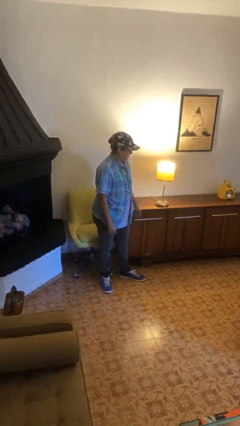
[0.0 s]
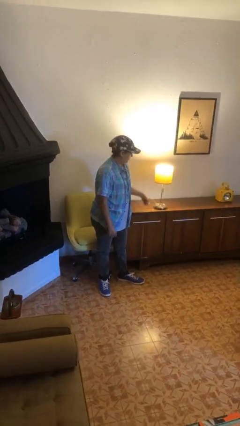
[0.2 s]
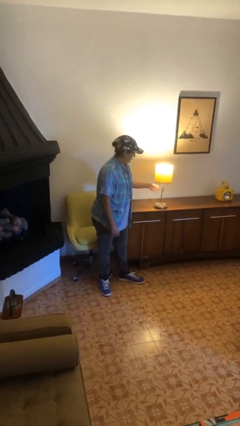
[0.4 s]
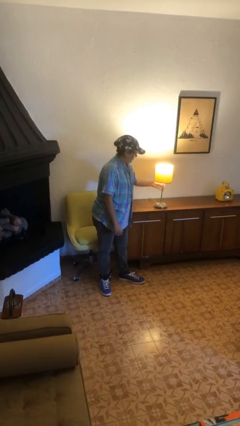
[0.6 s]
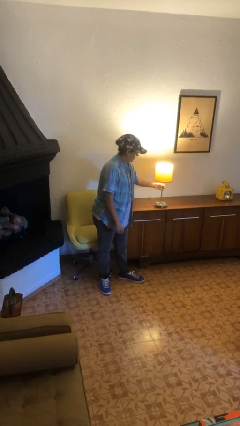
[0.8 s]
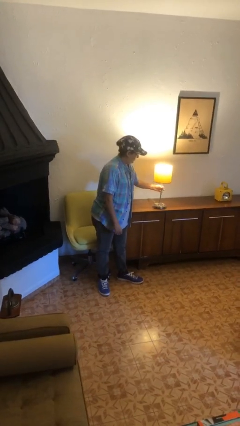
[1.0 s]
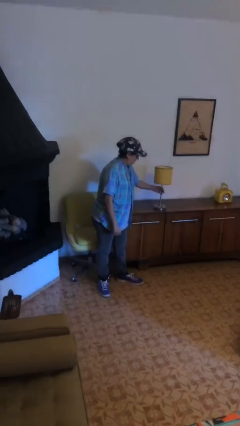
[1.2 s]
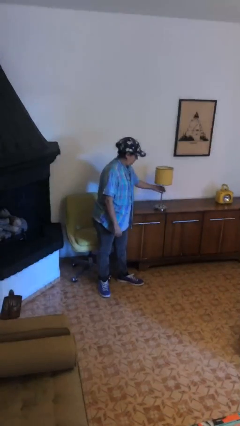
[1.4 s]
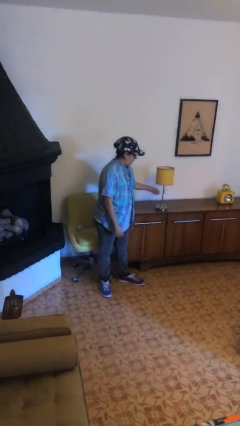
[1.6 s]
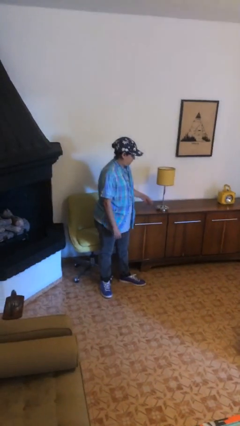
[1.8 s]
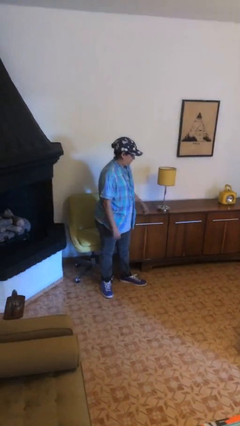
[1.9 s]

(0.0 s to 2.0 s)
person turns off lamp

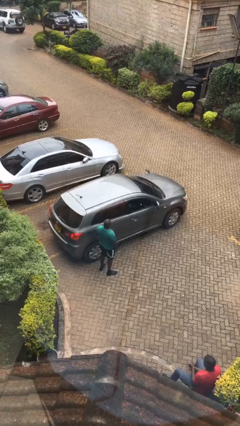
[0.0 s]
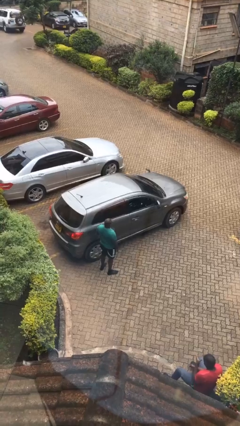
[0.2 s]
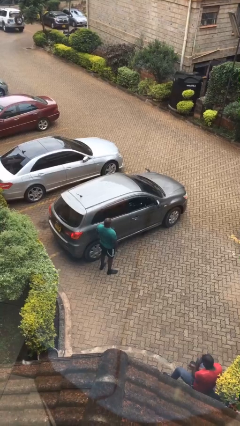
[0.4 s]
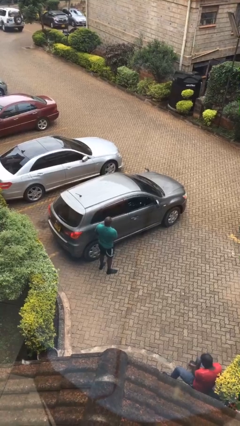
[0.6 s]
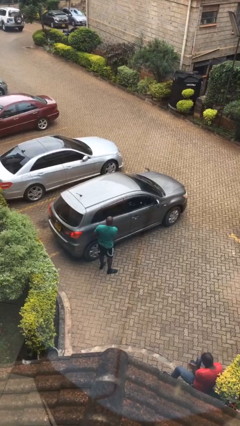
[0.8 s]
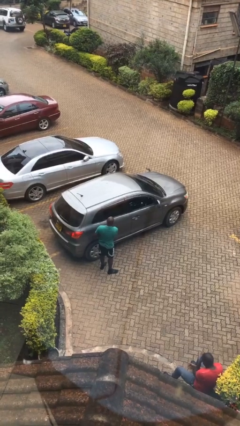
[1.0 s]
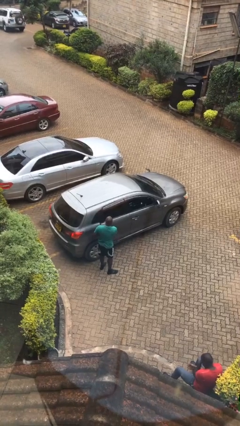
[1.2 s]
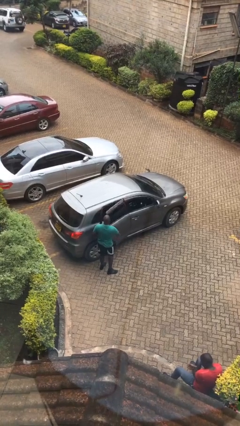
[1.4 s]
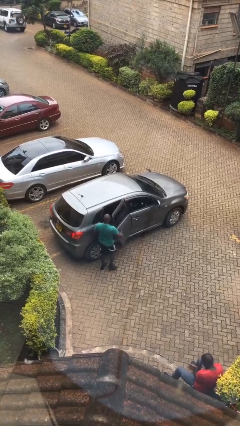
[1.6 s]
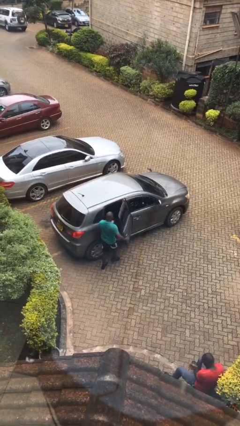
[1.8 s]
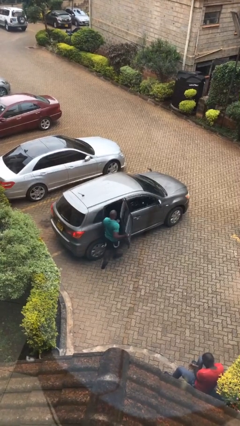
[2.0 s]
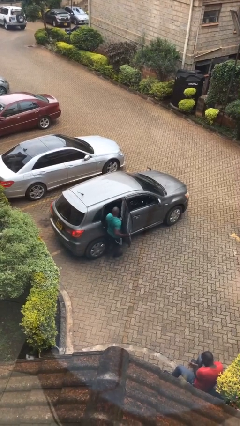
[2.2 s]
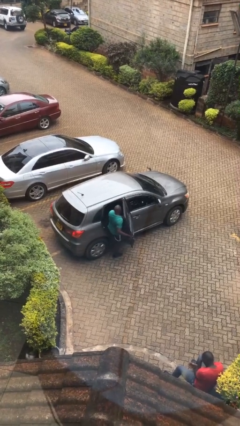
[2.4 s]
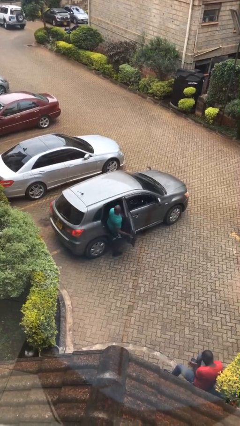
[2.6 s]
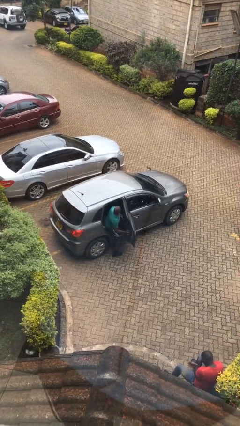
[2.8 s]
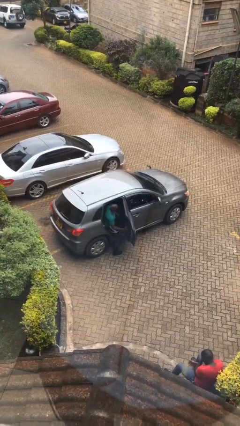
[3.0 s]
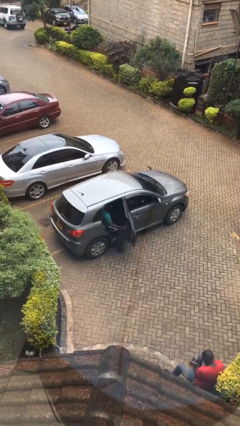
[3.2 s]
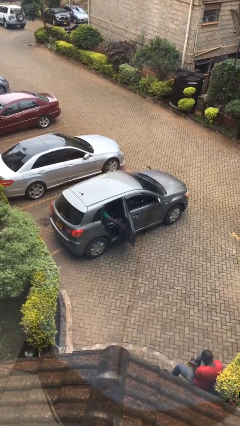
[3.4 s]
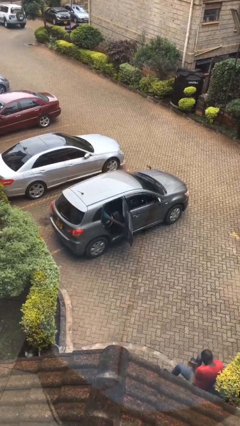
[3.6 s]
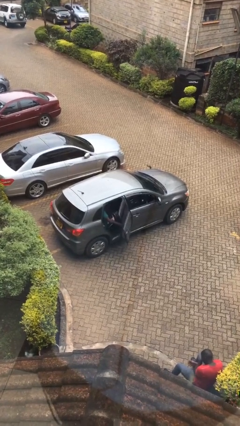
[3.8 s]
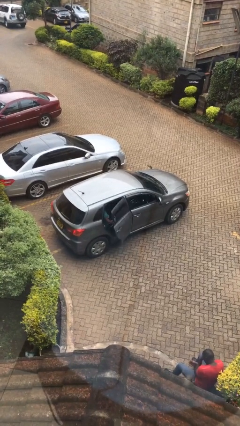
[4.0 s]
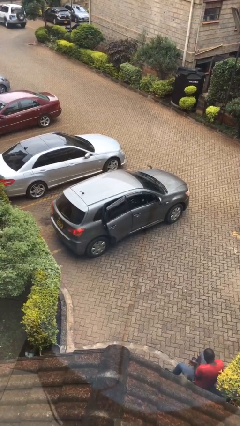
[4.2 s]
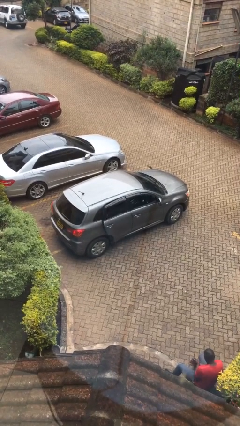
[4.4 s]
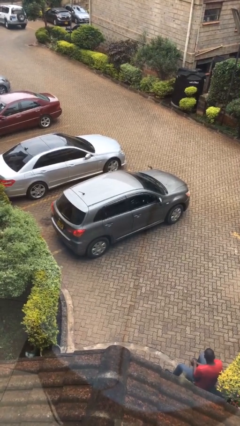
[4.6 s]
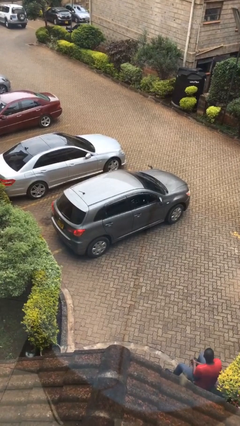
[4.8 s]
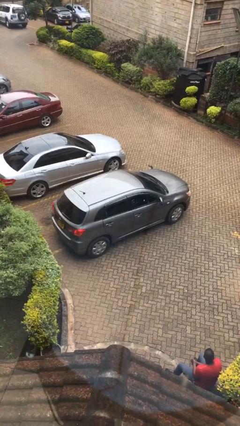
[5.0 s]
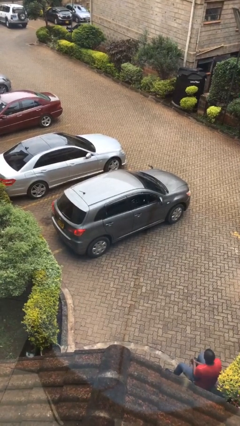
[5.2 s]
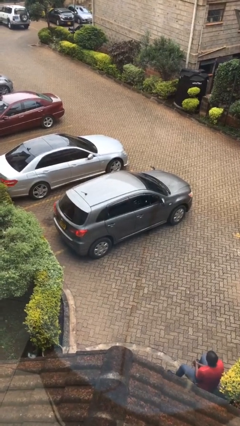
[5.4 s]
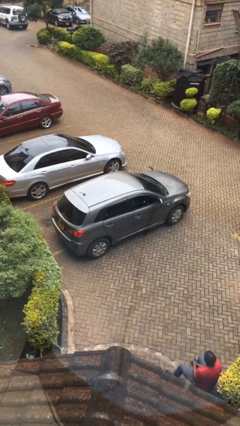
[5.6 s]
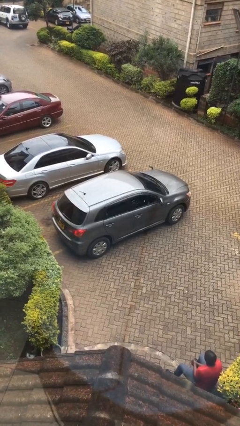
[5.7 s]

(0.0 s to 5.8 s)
car picks up person

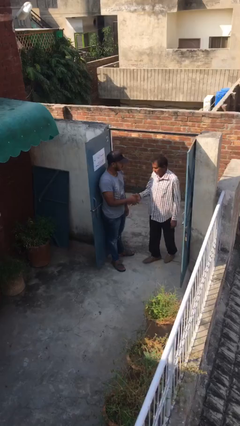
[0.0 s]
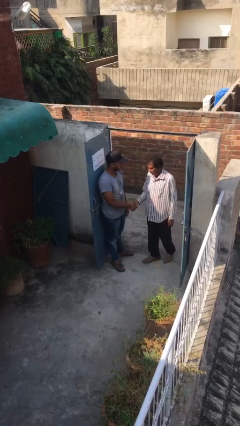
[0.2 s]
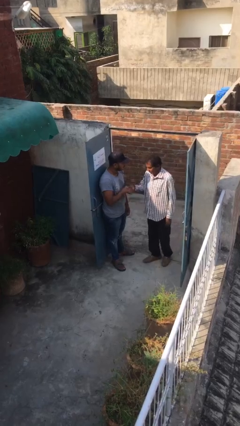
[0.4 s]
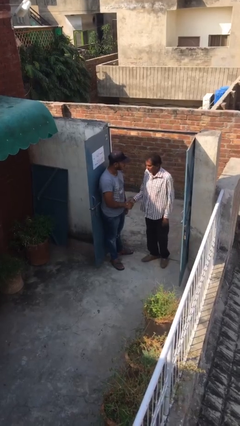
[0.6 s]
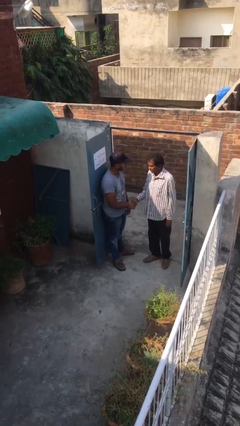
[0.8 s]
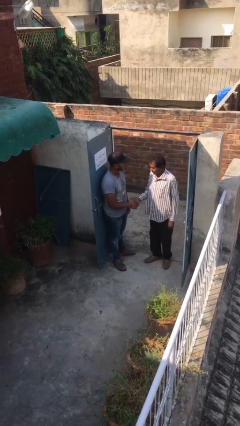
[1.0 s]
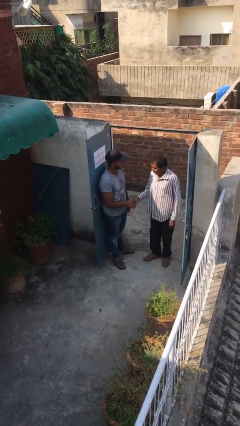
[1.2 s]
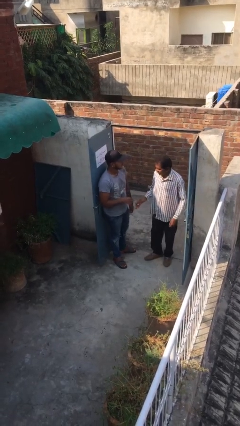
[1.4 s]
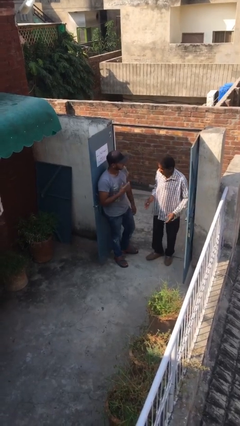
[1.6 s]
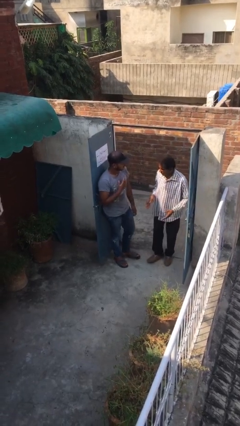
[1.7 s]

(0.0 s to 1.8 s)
person shakes hand

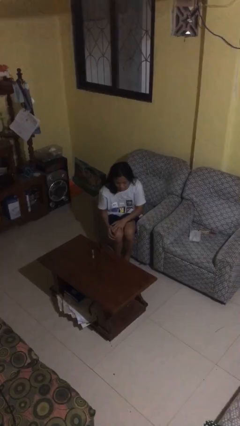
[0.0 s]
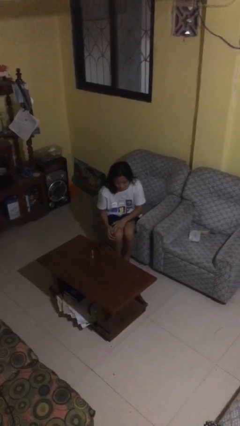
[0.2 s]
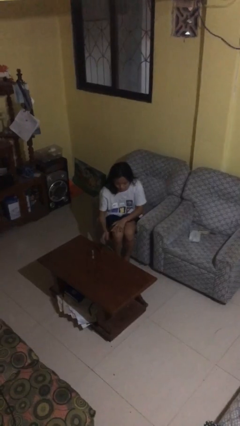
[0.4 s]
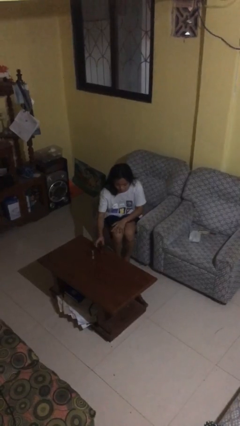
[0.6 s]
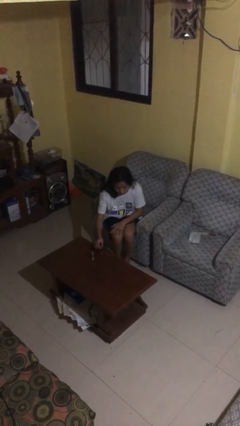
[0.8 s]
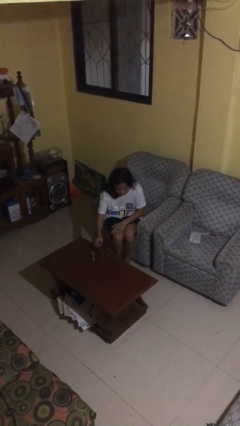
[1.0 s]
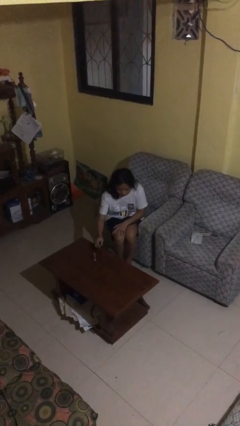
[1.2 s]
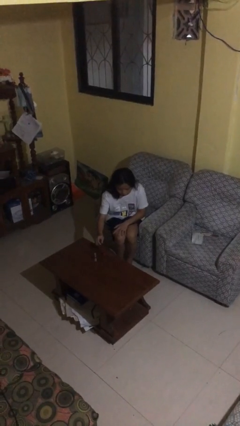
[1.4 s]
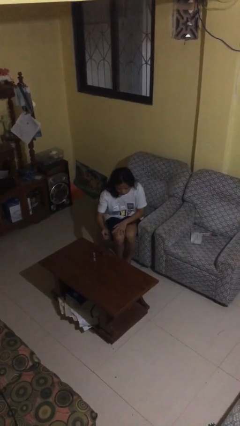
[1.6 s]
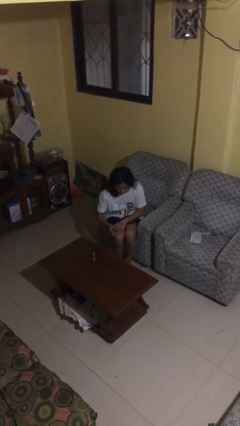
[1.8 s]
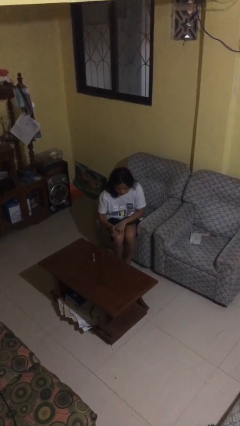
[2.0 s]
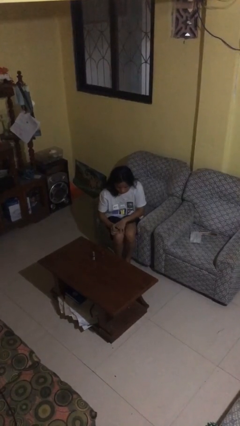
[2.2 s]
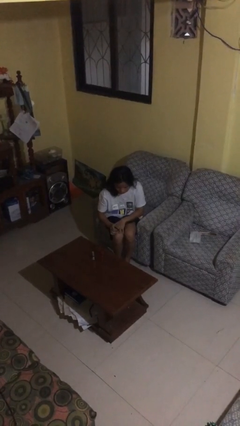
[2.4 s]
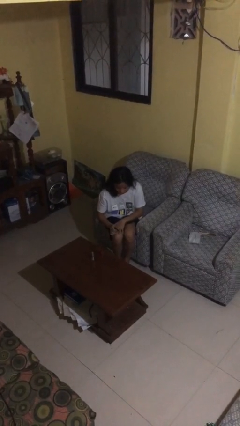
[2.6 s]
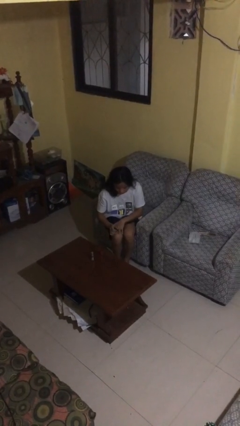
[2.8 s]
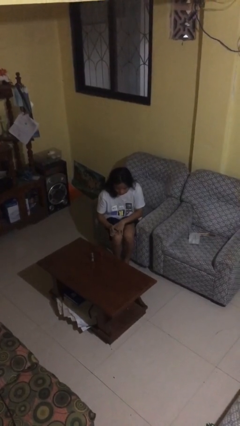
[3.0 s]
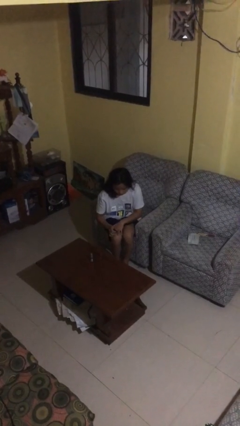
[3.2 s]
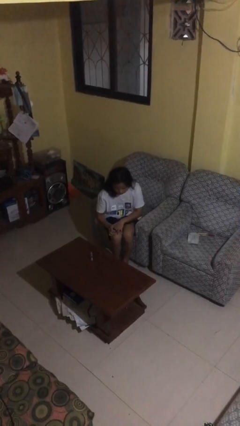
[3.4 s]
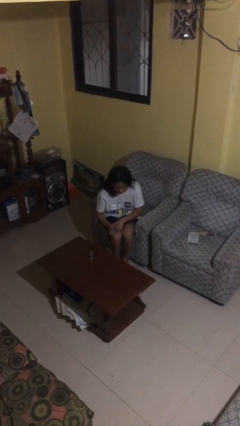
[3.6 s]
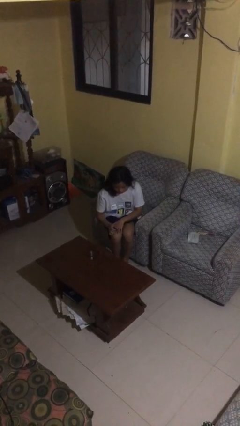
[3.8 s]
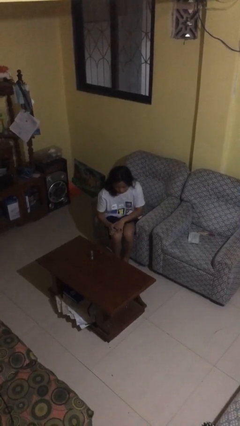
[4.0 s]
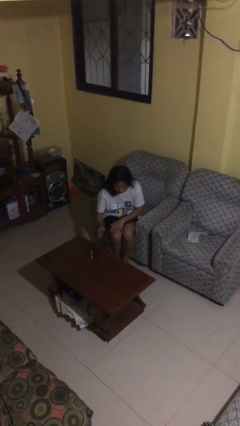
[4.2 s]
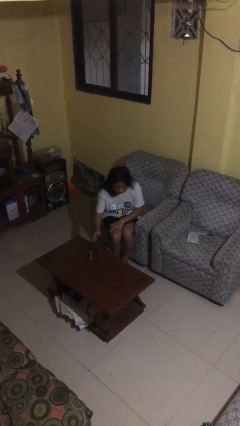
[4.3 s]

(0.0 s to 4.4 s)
person paints fingernails

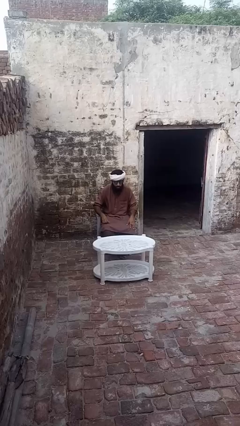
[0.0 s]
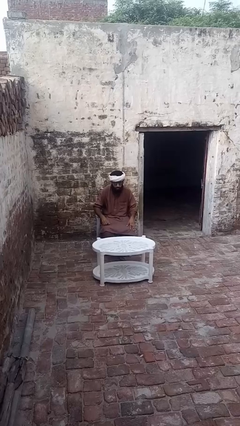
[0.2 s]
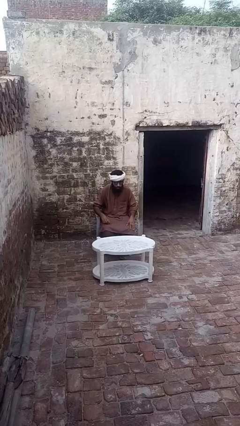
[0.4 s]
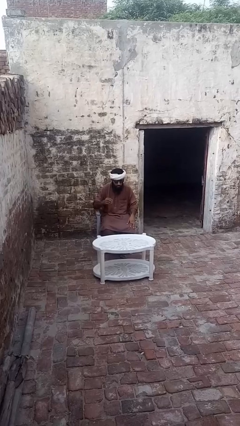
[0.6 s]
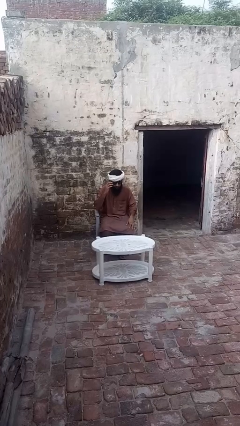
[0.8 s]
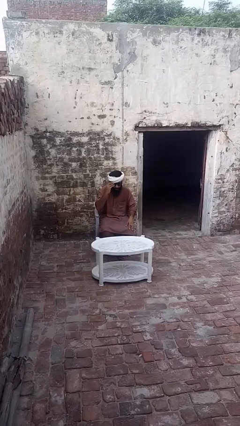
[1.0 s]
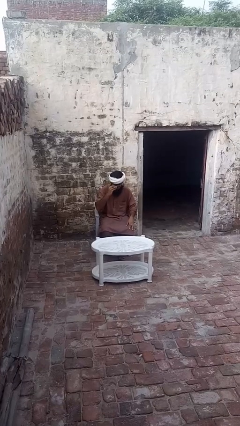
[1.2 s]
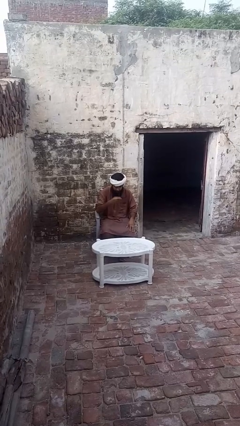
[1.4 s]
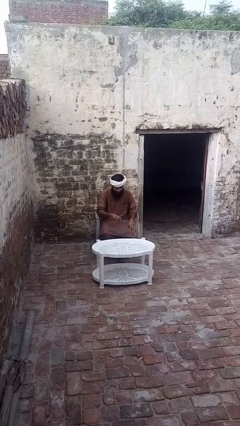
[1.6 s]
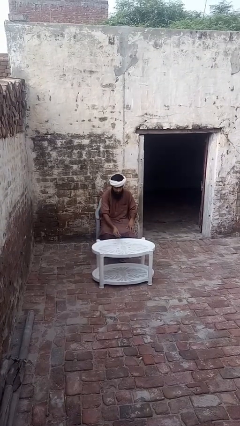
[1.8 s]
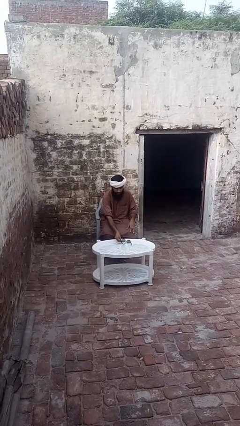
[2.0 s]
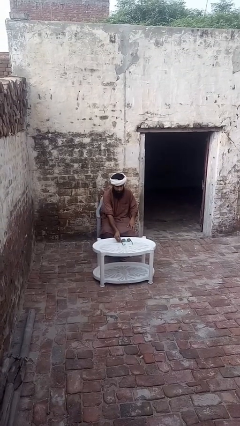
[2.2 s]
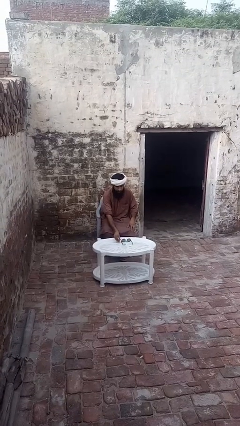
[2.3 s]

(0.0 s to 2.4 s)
person takes off sunglasses

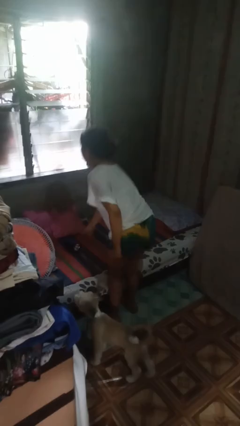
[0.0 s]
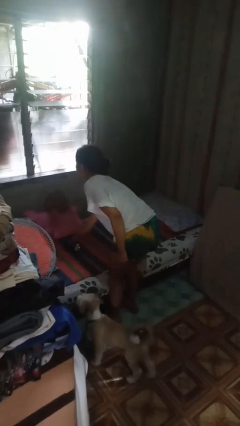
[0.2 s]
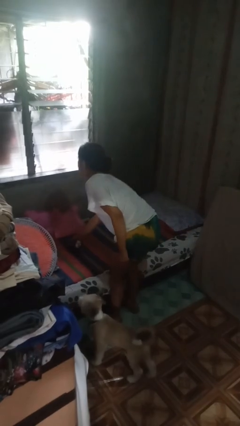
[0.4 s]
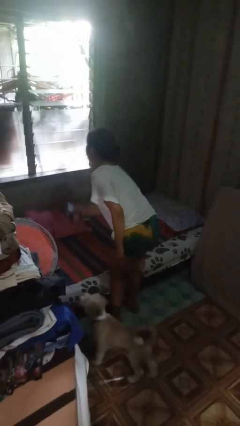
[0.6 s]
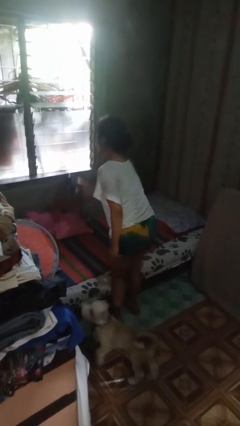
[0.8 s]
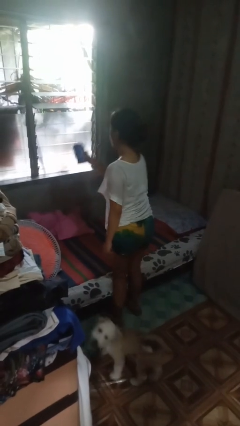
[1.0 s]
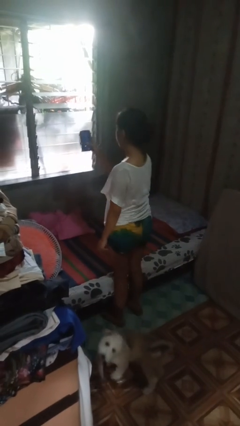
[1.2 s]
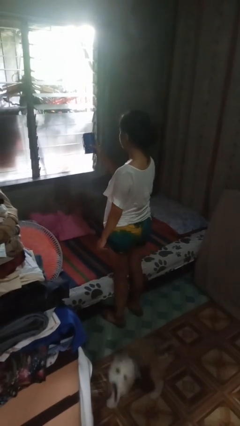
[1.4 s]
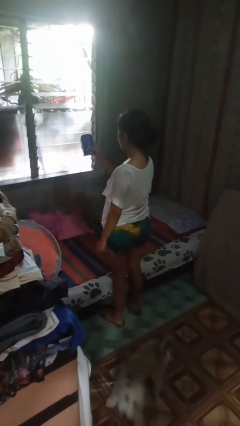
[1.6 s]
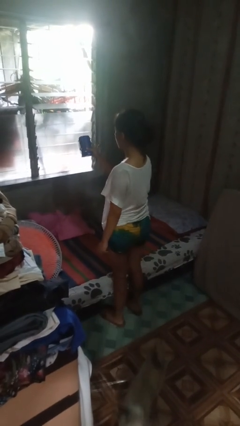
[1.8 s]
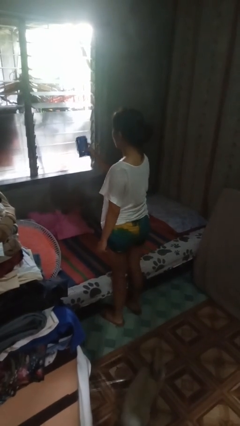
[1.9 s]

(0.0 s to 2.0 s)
person picks up object from bed
